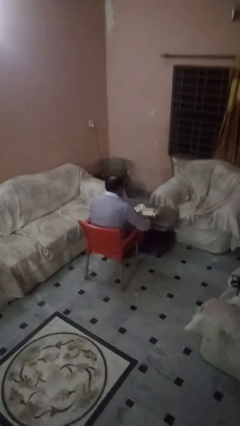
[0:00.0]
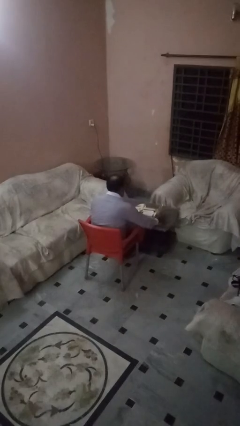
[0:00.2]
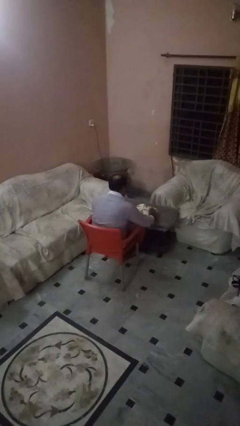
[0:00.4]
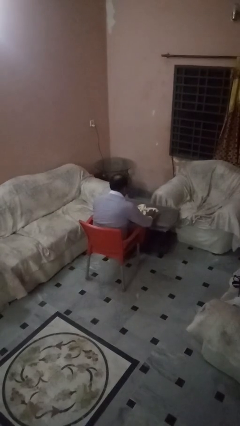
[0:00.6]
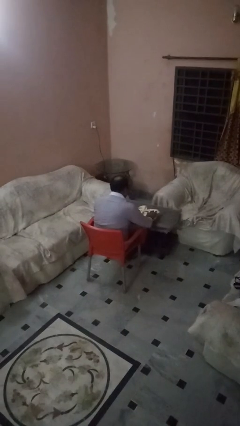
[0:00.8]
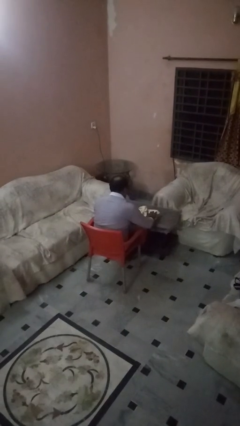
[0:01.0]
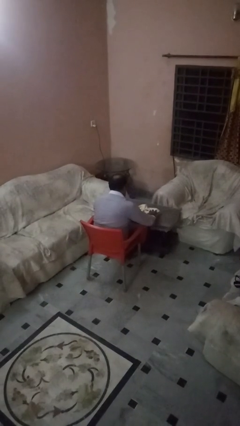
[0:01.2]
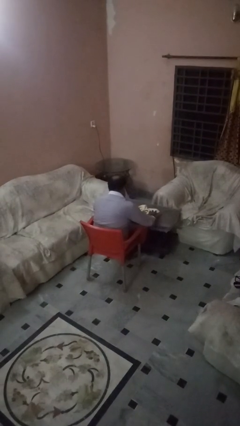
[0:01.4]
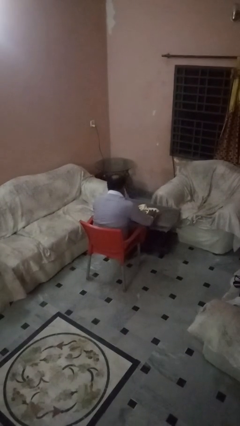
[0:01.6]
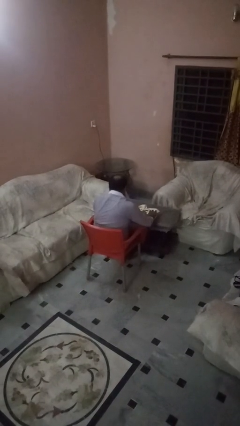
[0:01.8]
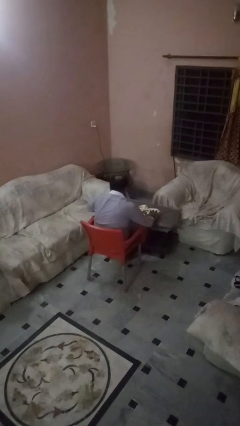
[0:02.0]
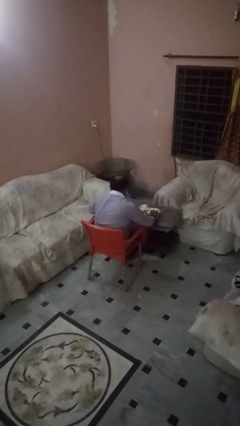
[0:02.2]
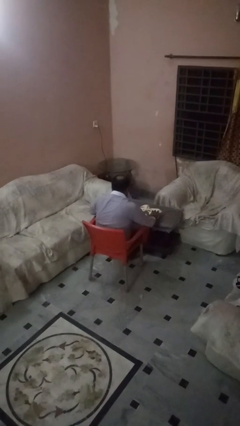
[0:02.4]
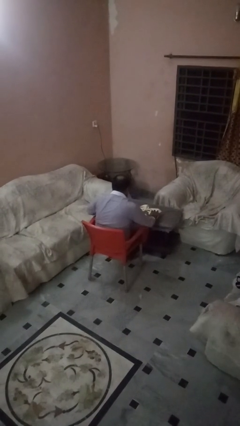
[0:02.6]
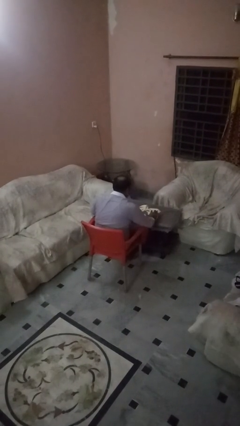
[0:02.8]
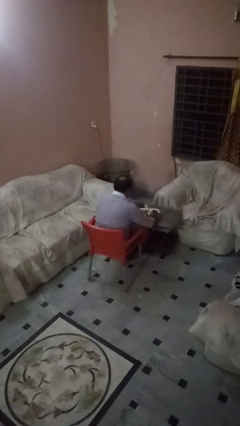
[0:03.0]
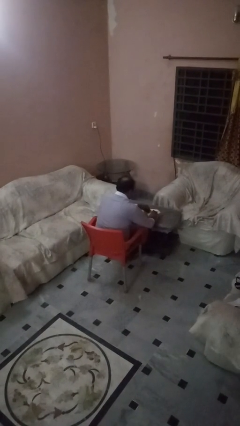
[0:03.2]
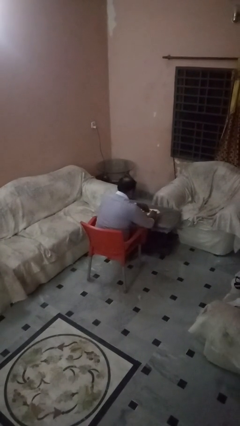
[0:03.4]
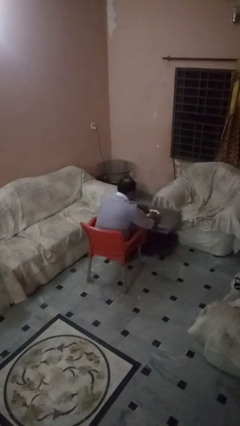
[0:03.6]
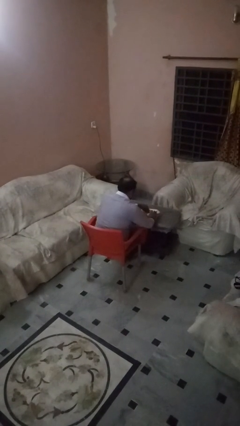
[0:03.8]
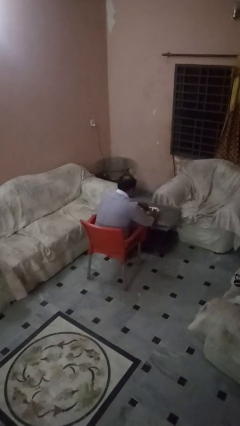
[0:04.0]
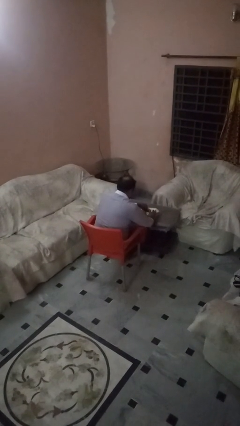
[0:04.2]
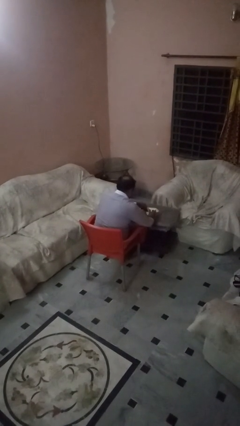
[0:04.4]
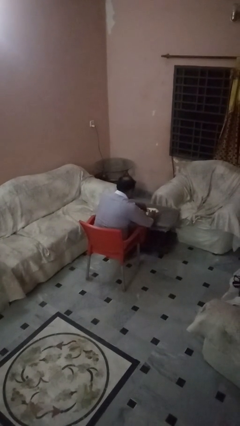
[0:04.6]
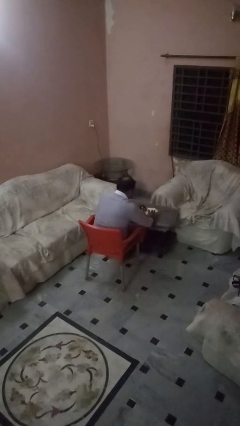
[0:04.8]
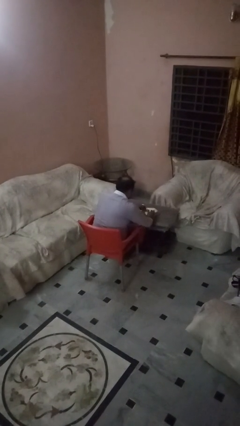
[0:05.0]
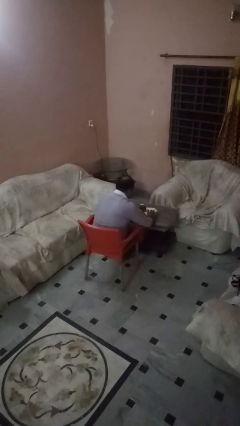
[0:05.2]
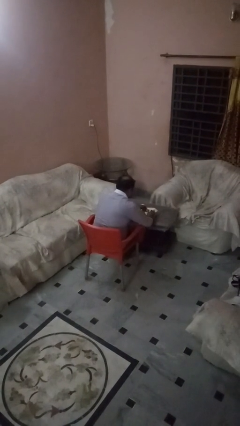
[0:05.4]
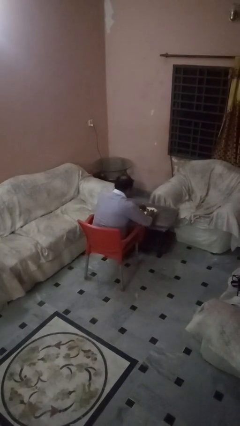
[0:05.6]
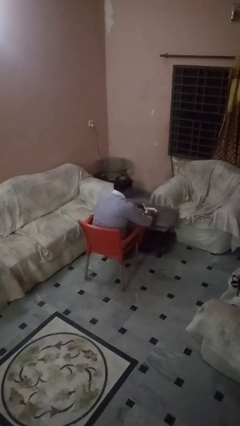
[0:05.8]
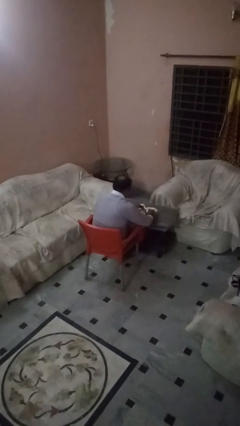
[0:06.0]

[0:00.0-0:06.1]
person wraps box

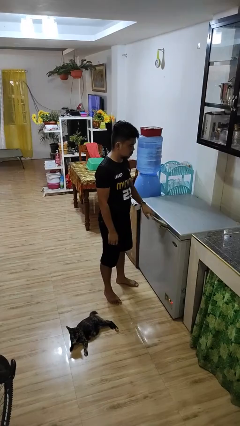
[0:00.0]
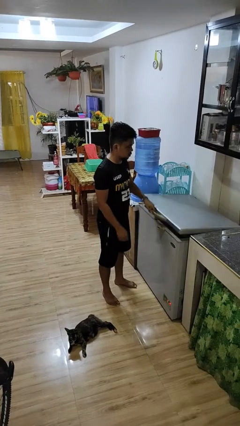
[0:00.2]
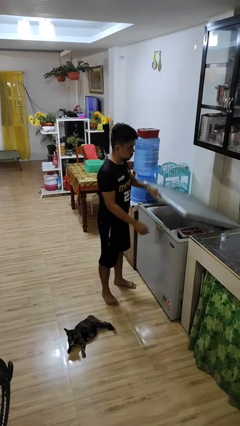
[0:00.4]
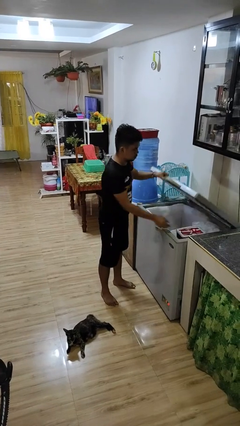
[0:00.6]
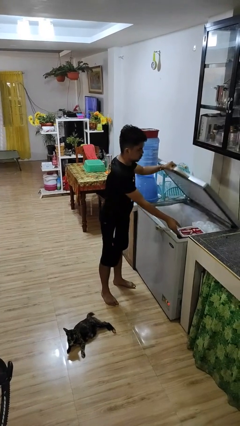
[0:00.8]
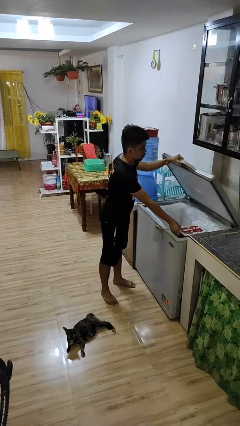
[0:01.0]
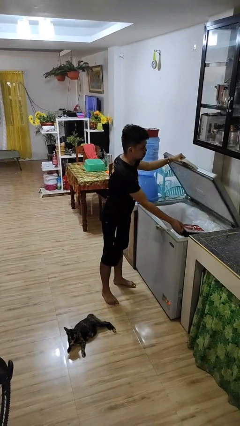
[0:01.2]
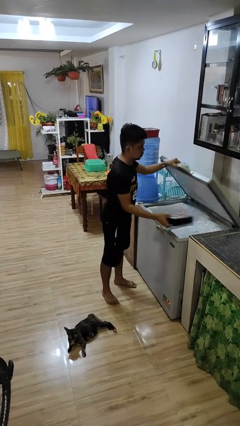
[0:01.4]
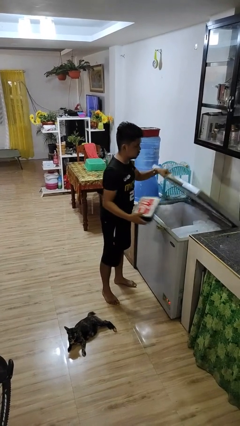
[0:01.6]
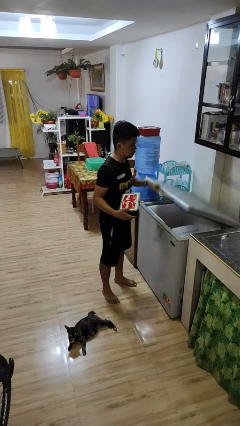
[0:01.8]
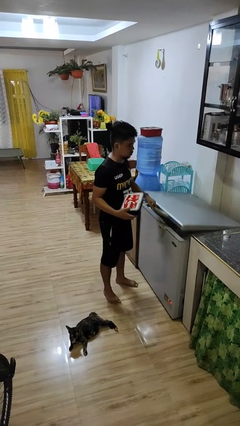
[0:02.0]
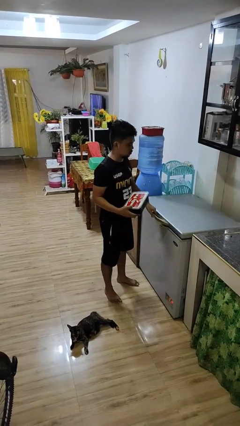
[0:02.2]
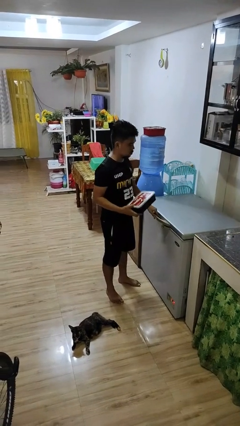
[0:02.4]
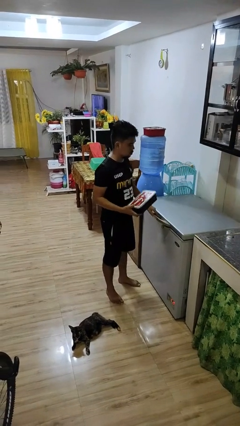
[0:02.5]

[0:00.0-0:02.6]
person takes object from refrigerator

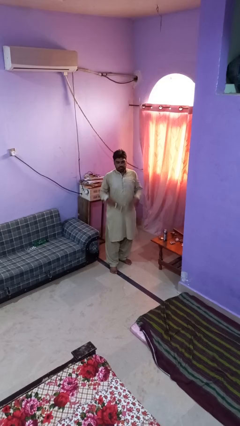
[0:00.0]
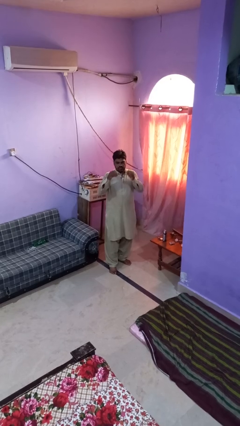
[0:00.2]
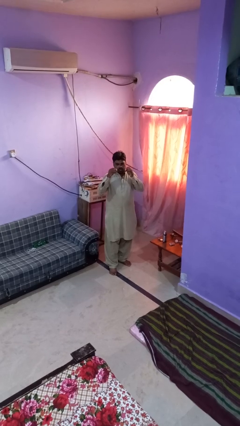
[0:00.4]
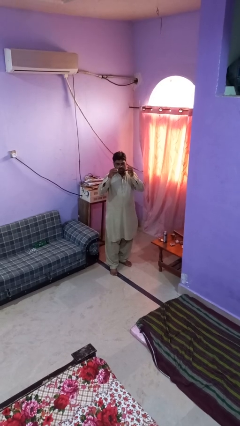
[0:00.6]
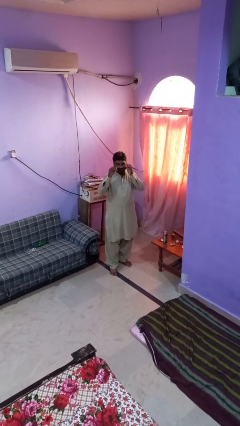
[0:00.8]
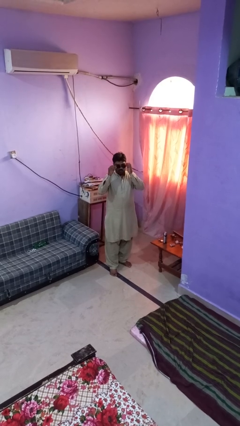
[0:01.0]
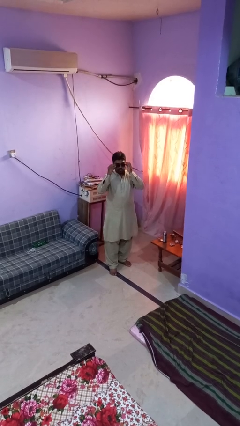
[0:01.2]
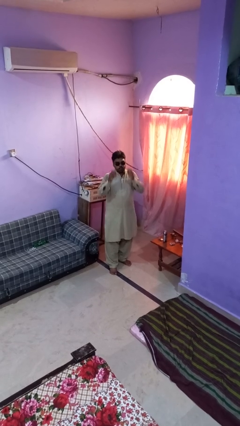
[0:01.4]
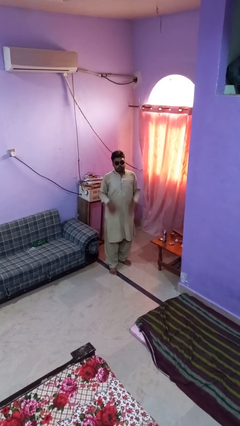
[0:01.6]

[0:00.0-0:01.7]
person puts on sunglasses

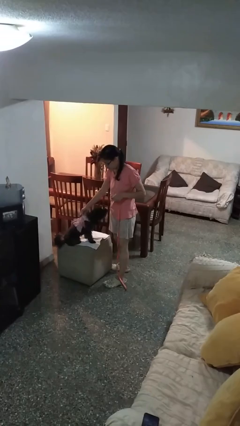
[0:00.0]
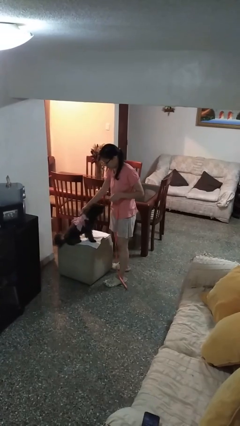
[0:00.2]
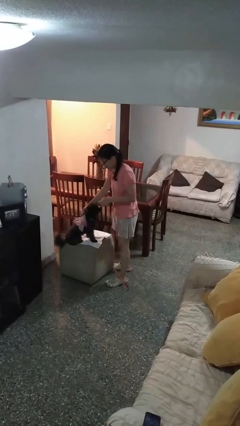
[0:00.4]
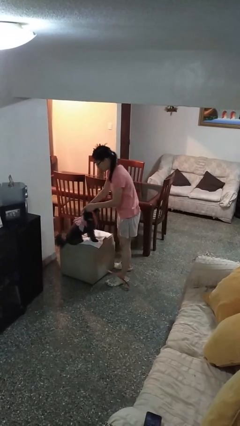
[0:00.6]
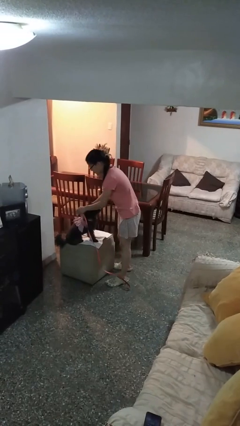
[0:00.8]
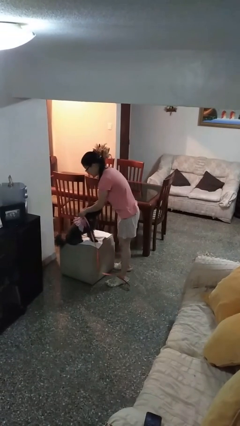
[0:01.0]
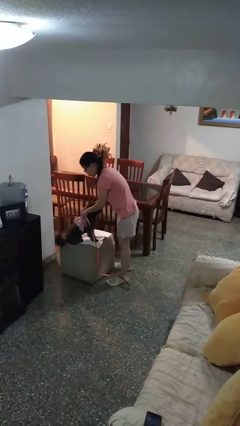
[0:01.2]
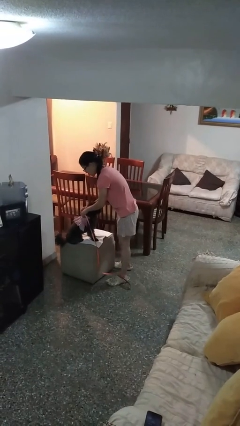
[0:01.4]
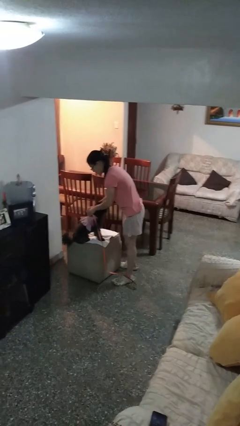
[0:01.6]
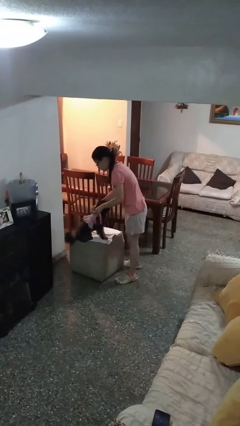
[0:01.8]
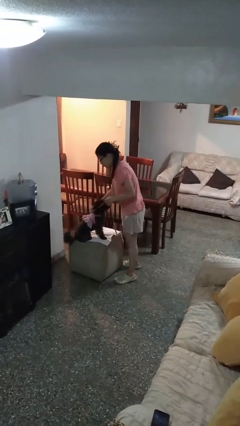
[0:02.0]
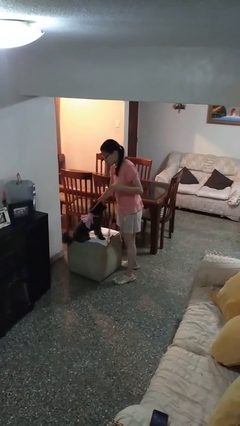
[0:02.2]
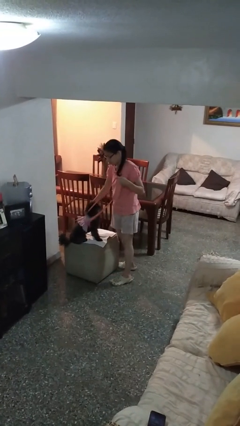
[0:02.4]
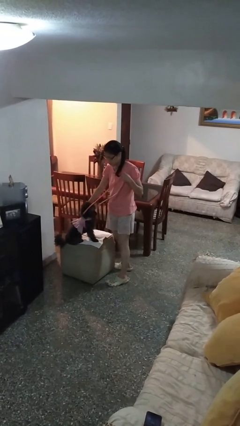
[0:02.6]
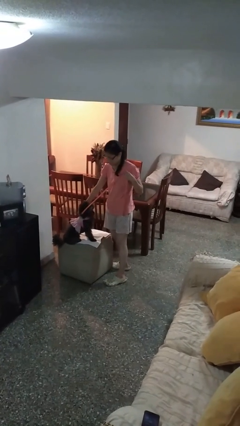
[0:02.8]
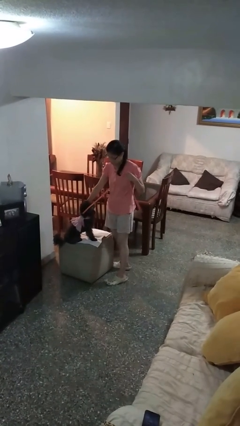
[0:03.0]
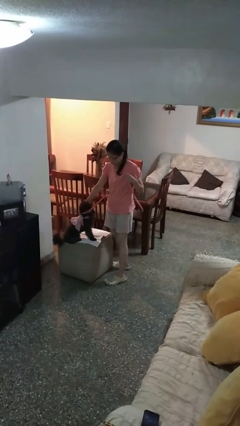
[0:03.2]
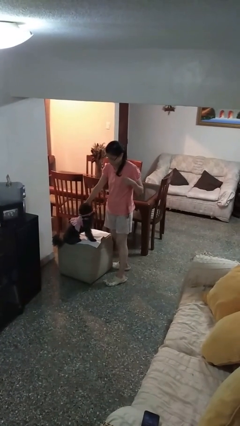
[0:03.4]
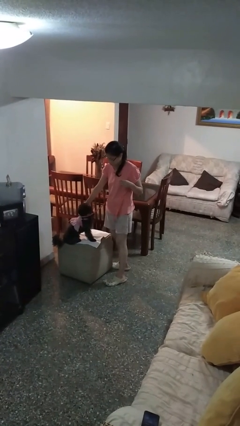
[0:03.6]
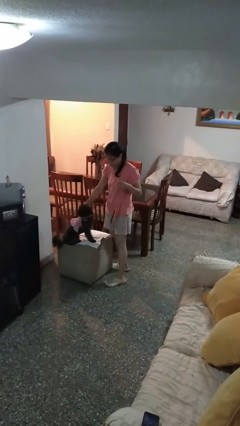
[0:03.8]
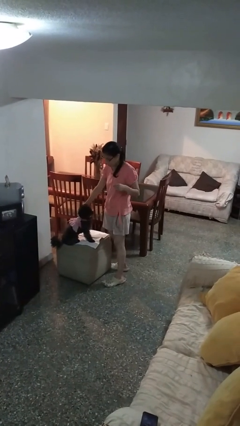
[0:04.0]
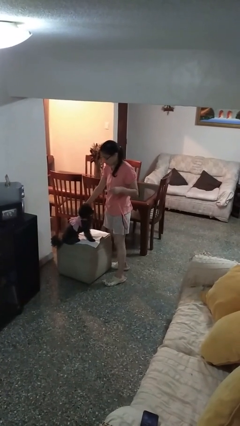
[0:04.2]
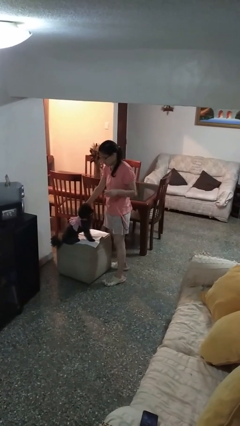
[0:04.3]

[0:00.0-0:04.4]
person attaches leash to dog

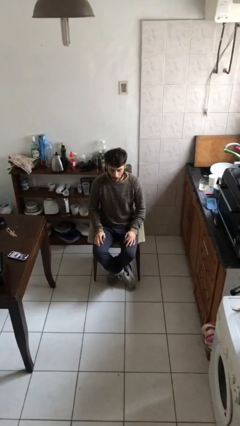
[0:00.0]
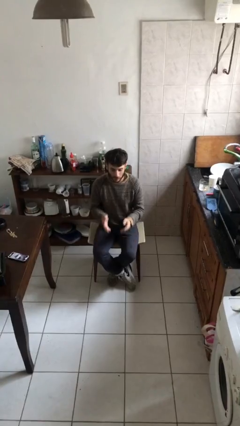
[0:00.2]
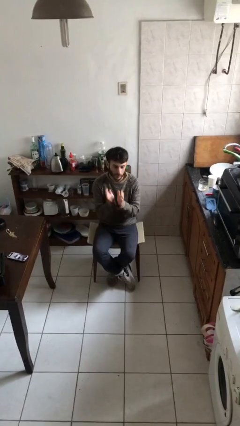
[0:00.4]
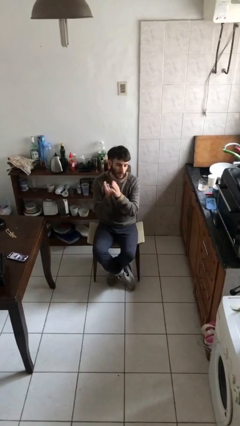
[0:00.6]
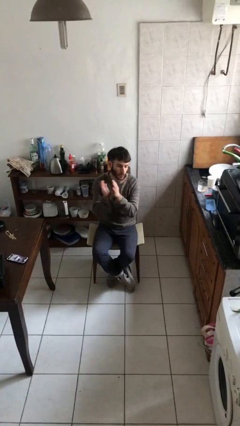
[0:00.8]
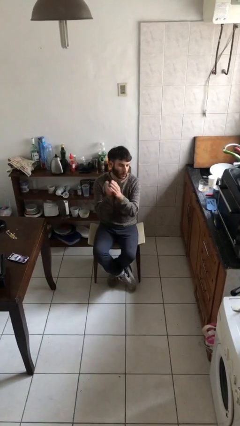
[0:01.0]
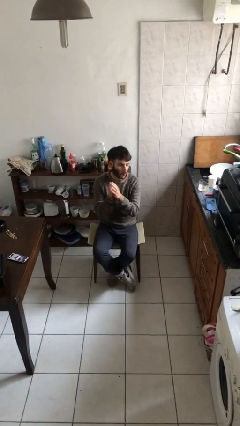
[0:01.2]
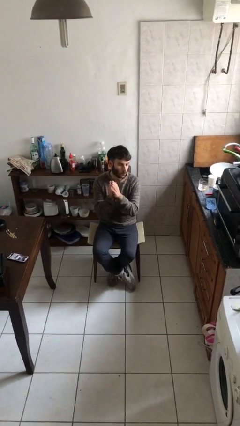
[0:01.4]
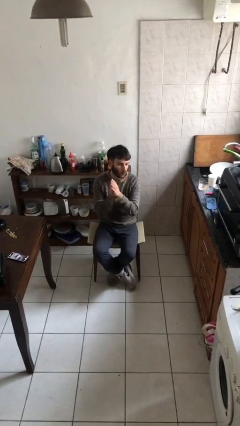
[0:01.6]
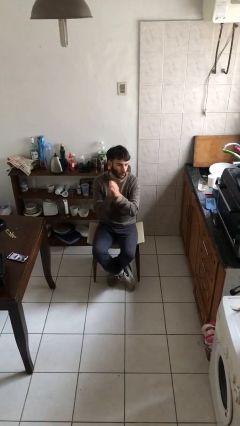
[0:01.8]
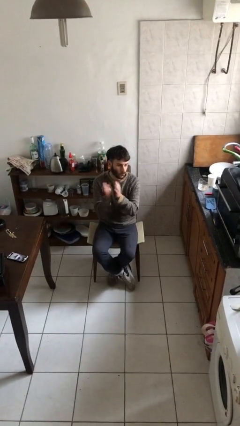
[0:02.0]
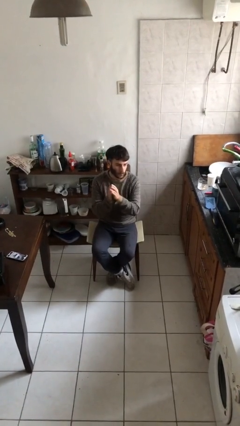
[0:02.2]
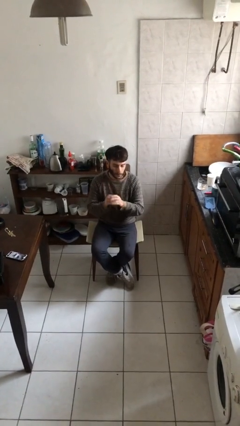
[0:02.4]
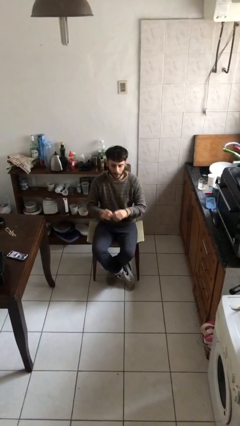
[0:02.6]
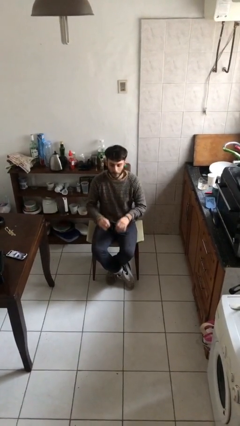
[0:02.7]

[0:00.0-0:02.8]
person claps hands

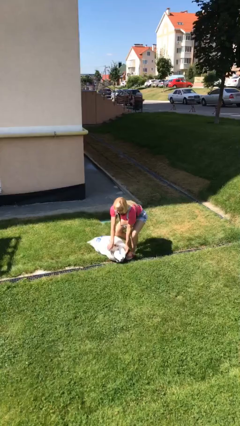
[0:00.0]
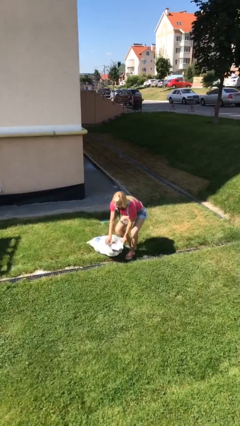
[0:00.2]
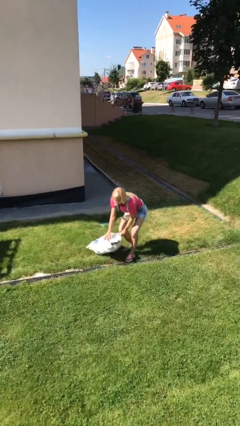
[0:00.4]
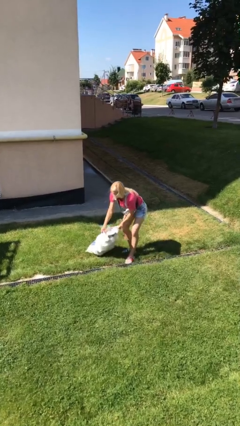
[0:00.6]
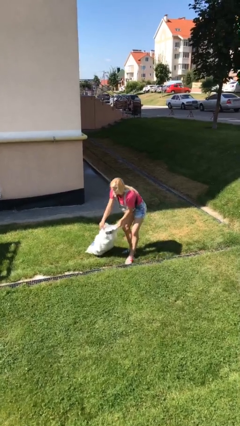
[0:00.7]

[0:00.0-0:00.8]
person picks up object from floor
